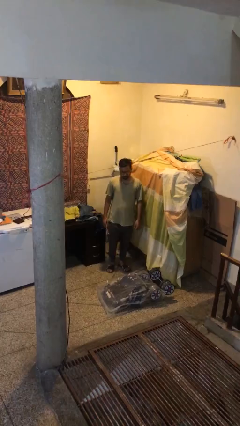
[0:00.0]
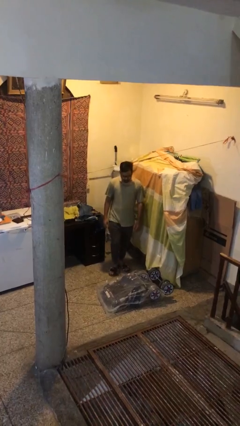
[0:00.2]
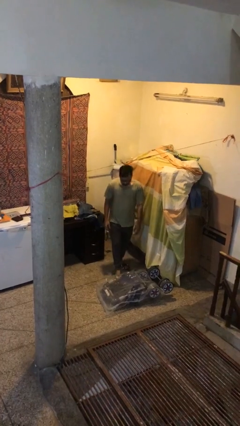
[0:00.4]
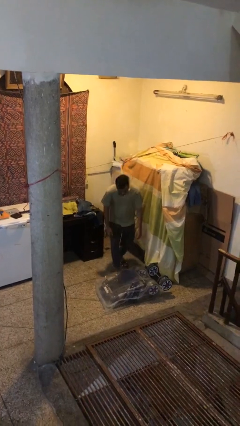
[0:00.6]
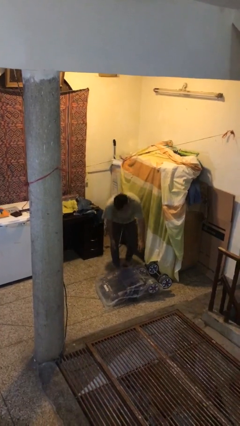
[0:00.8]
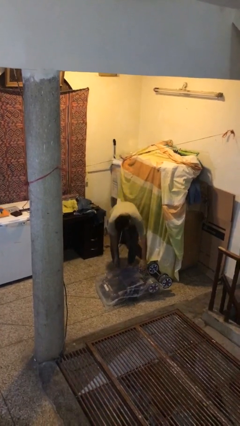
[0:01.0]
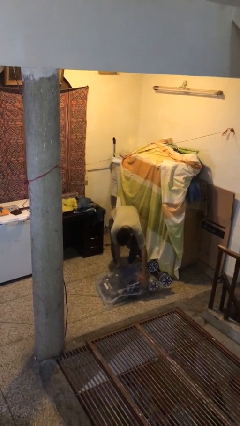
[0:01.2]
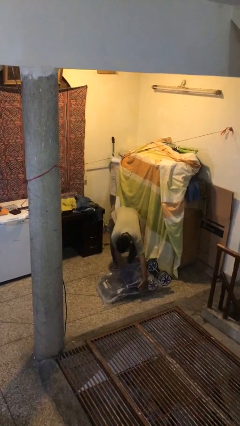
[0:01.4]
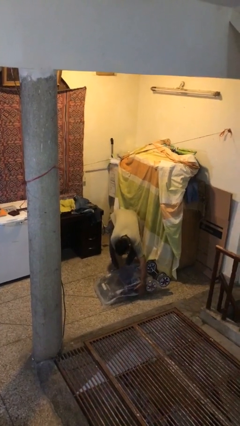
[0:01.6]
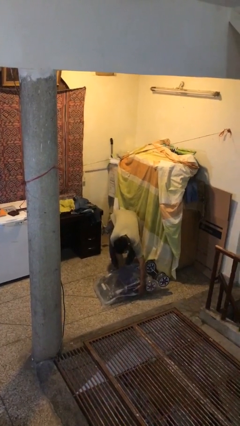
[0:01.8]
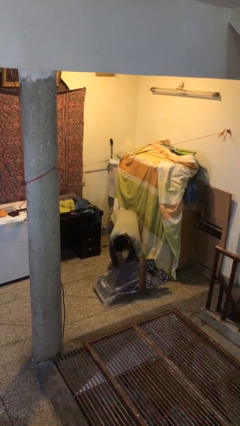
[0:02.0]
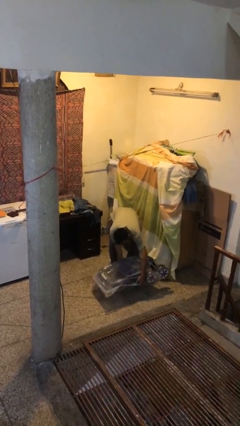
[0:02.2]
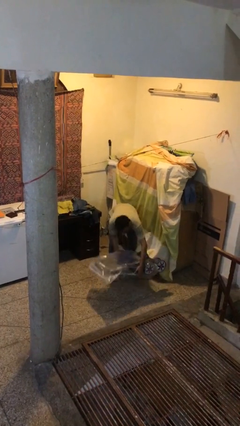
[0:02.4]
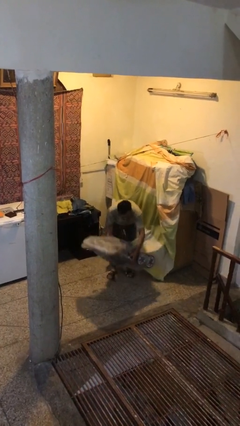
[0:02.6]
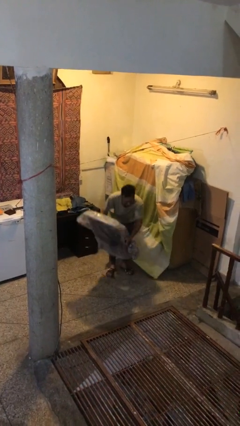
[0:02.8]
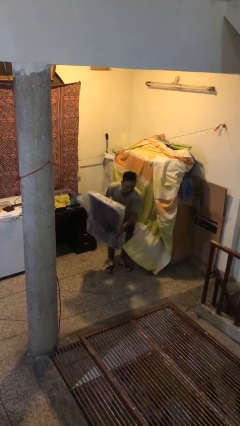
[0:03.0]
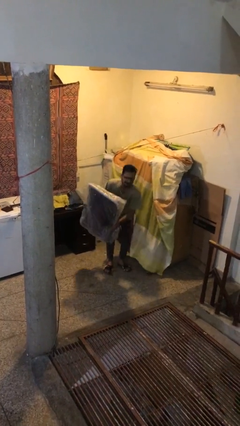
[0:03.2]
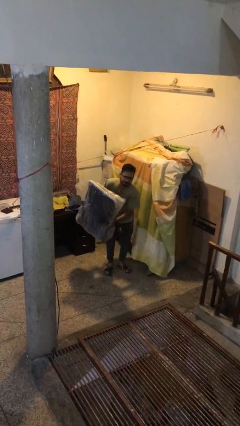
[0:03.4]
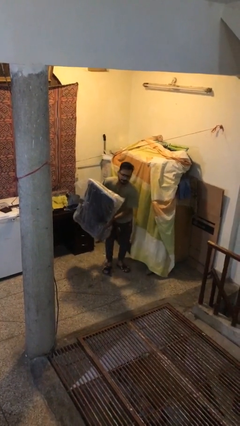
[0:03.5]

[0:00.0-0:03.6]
person picks up object from floor

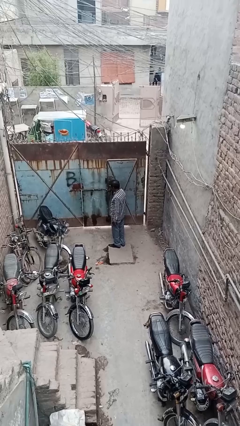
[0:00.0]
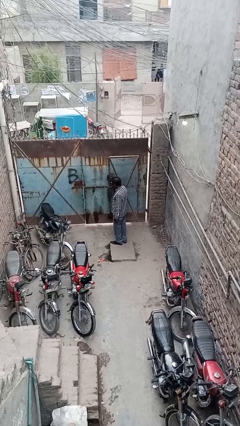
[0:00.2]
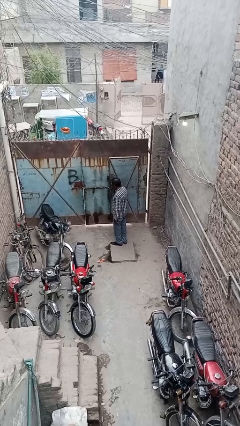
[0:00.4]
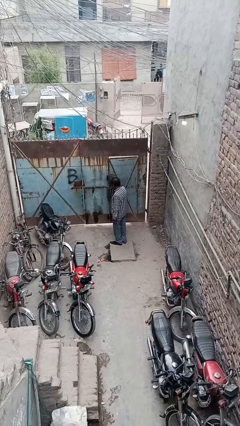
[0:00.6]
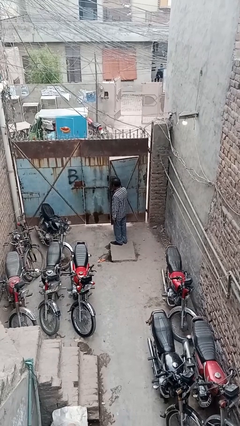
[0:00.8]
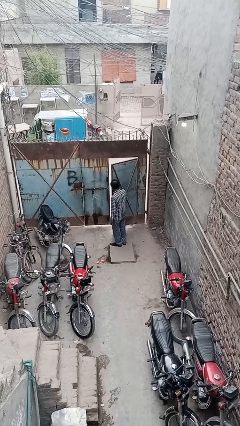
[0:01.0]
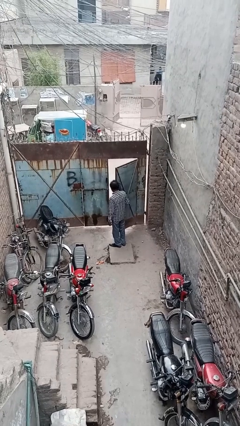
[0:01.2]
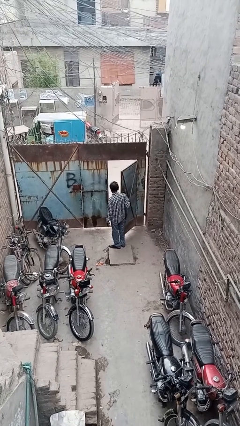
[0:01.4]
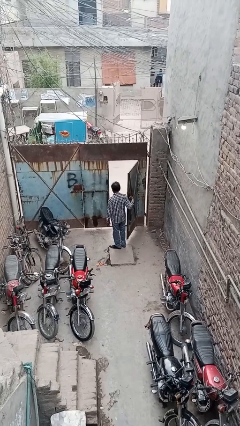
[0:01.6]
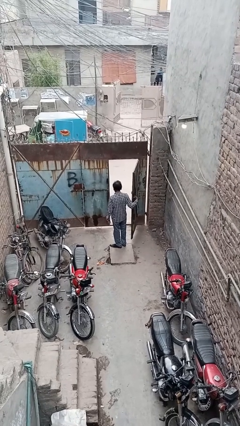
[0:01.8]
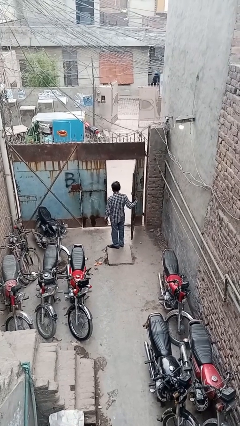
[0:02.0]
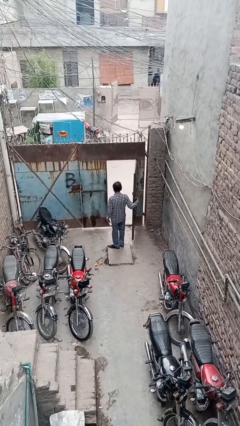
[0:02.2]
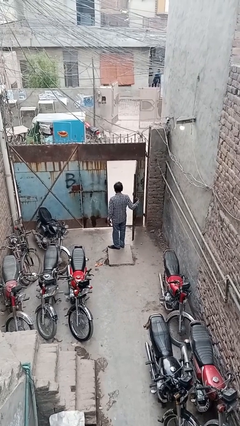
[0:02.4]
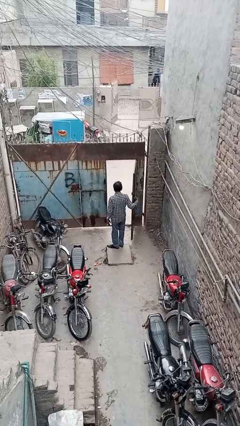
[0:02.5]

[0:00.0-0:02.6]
person opens facility door

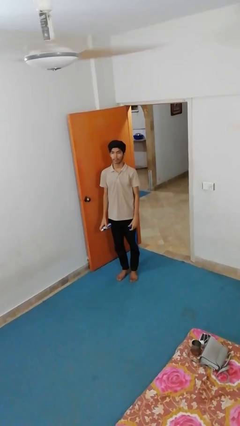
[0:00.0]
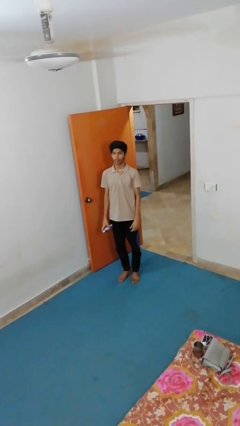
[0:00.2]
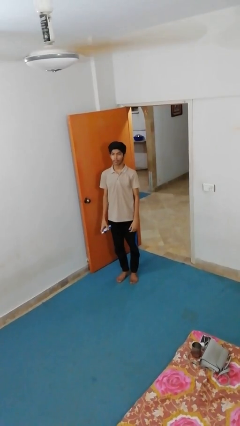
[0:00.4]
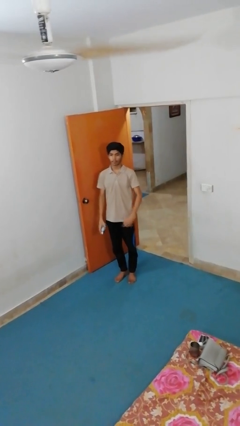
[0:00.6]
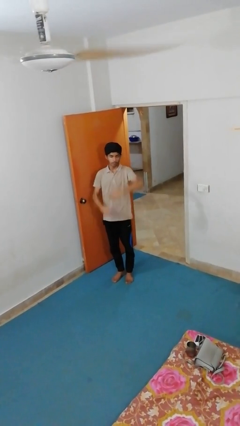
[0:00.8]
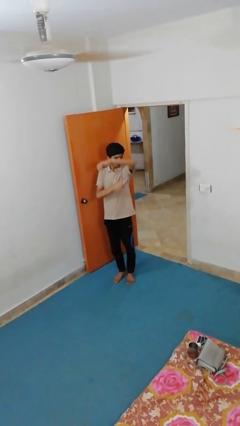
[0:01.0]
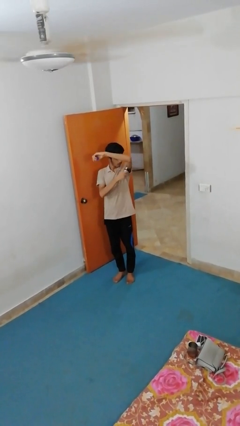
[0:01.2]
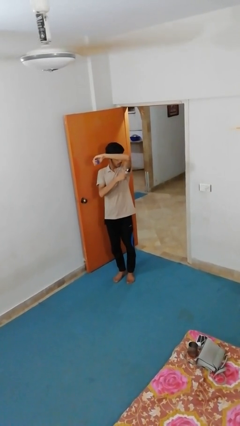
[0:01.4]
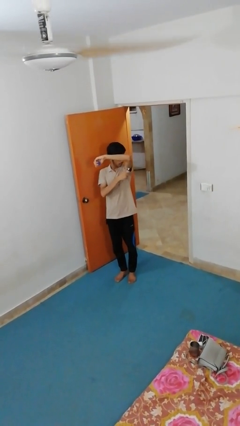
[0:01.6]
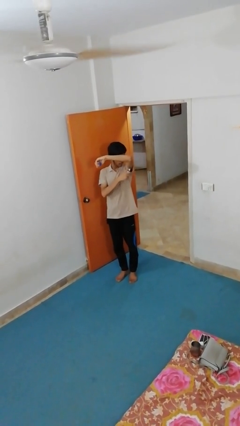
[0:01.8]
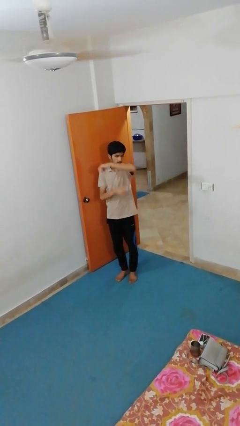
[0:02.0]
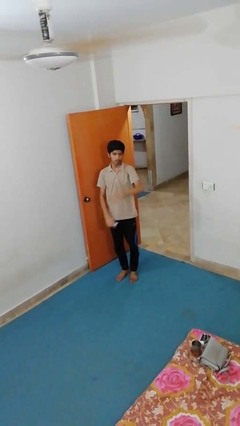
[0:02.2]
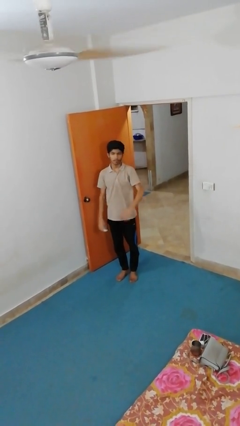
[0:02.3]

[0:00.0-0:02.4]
person applies deodorant

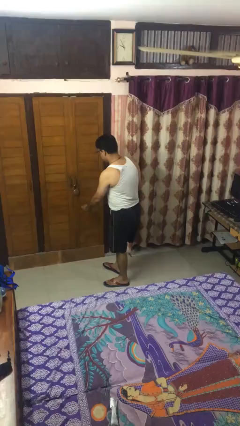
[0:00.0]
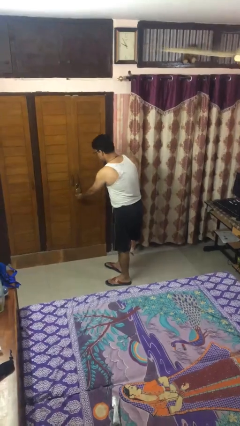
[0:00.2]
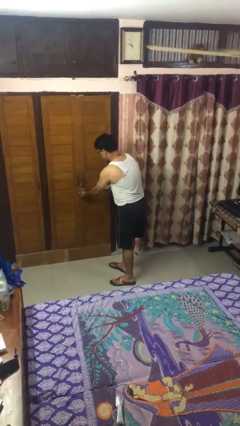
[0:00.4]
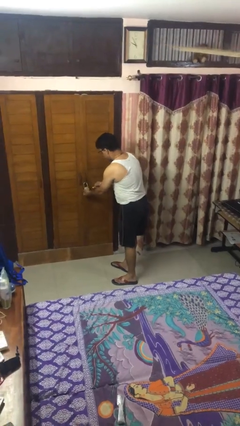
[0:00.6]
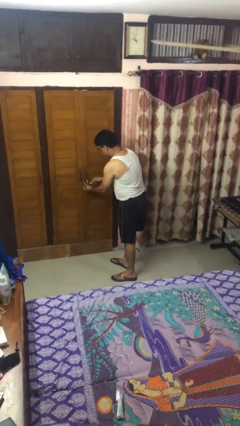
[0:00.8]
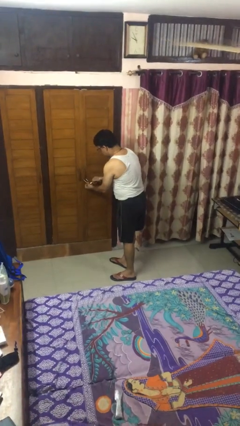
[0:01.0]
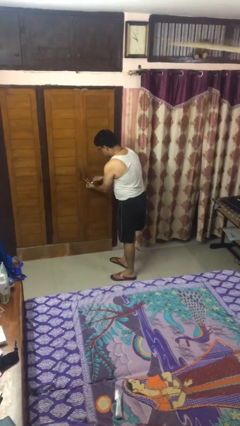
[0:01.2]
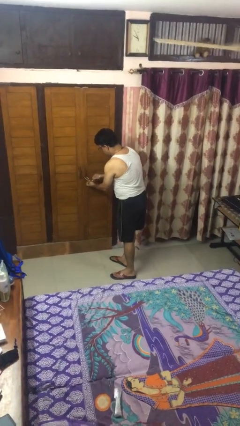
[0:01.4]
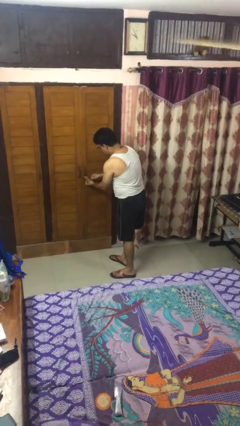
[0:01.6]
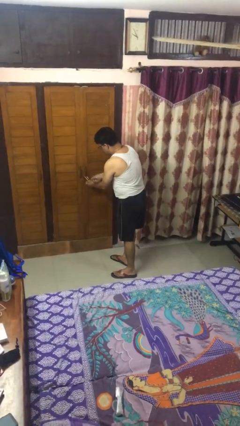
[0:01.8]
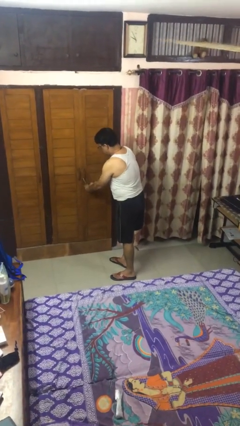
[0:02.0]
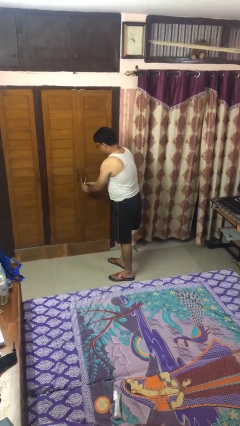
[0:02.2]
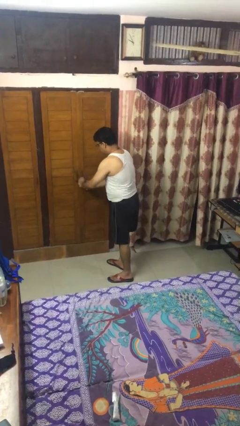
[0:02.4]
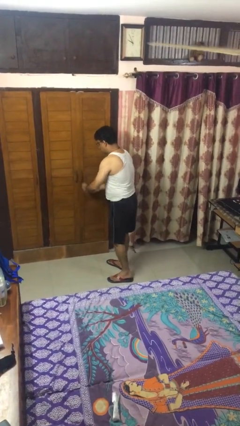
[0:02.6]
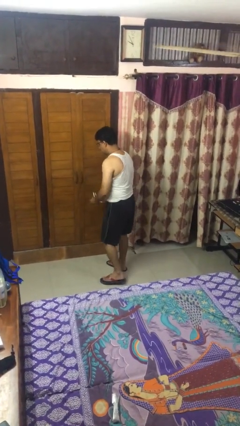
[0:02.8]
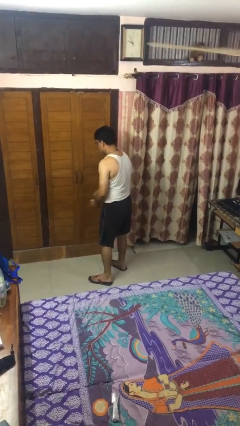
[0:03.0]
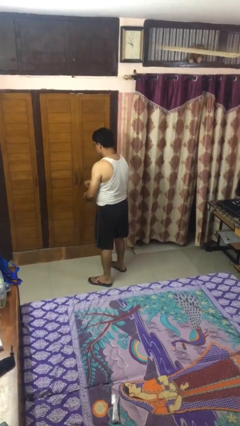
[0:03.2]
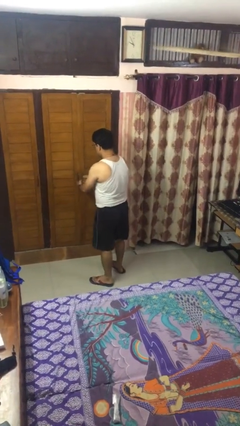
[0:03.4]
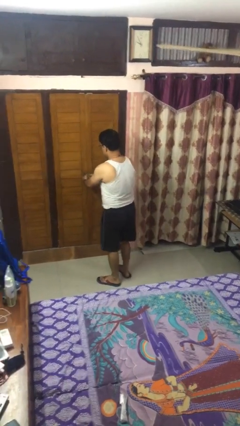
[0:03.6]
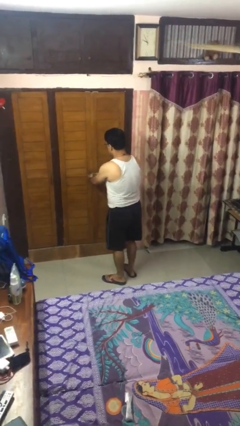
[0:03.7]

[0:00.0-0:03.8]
person unlocks door with keys

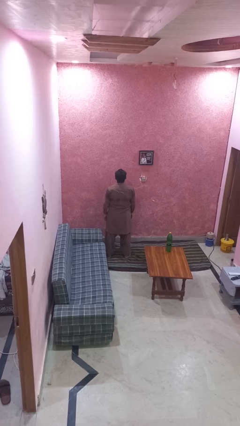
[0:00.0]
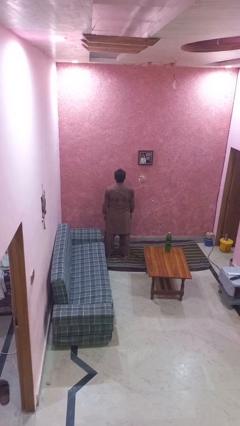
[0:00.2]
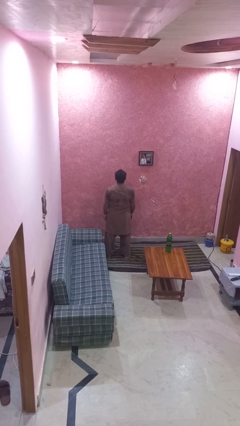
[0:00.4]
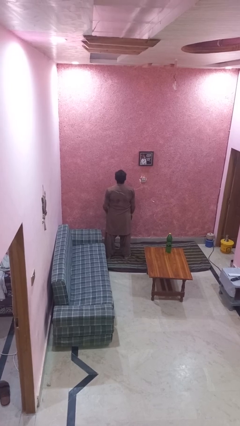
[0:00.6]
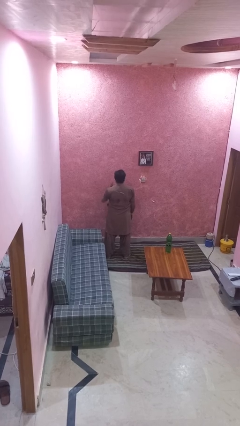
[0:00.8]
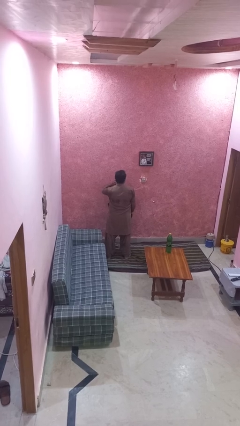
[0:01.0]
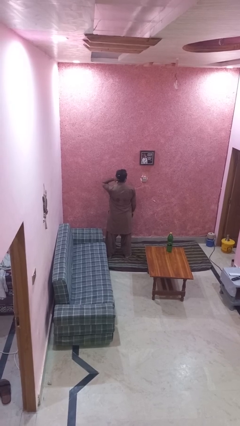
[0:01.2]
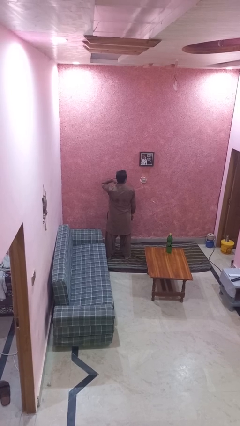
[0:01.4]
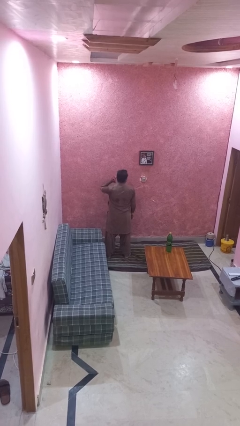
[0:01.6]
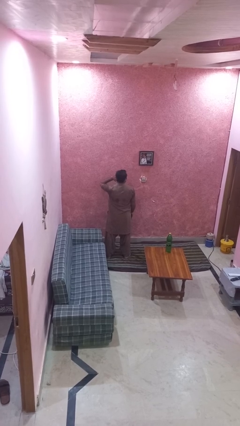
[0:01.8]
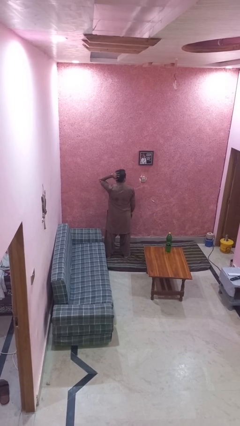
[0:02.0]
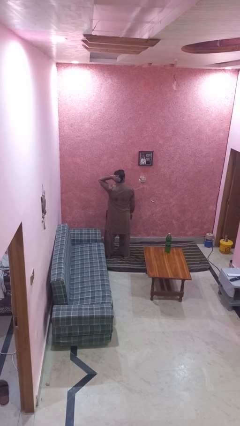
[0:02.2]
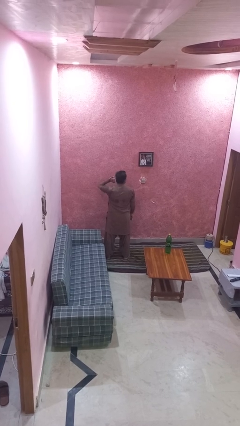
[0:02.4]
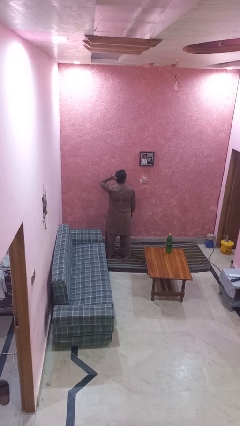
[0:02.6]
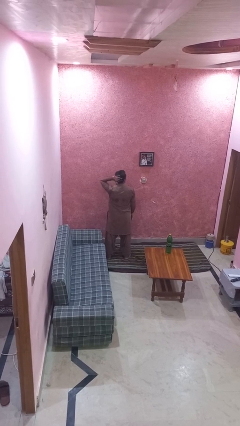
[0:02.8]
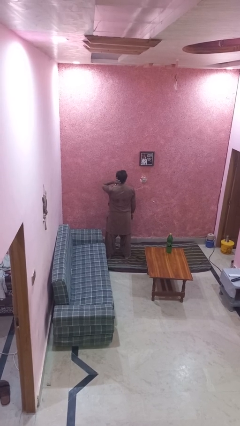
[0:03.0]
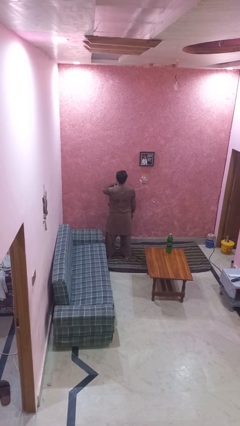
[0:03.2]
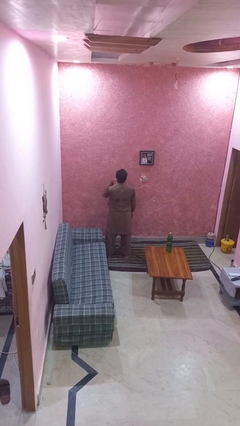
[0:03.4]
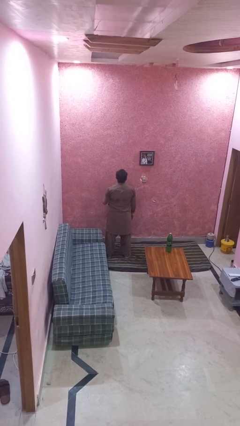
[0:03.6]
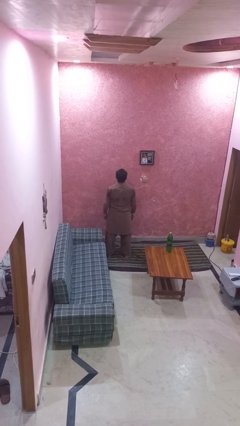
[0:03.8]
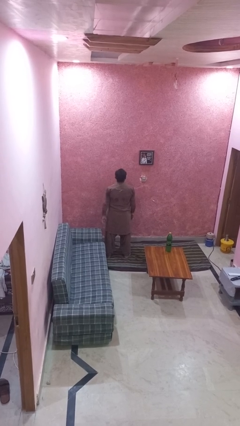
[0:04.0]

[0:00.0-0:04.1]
person strokes hair

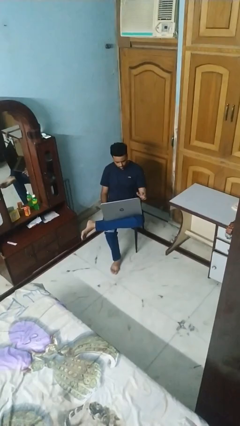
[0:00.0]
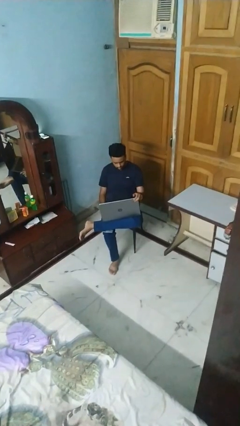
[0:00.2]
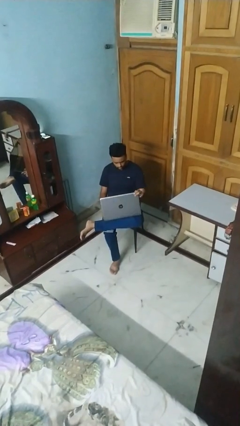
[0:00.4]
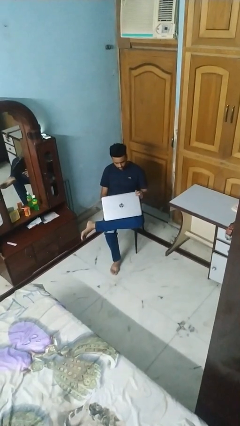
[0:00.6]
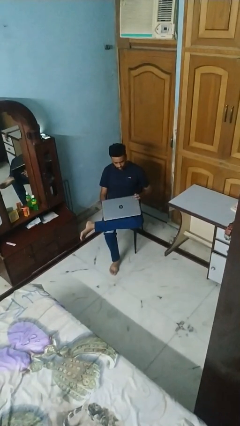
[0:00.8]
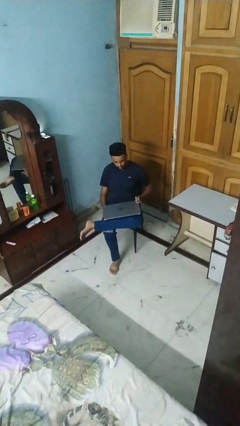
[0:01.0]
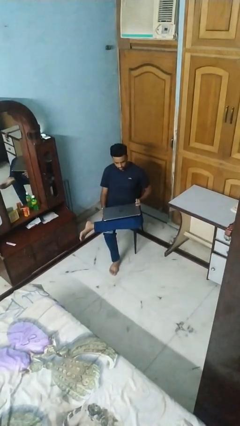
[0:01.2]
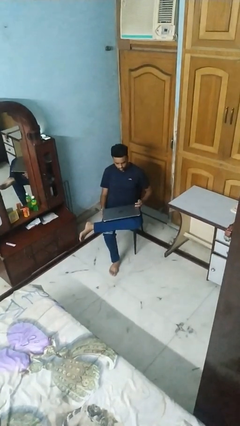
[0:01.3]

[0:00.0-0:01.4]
person closes laptop
